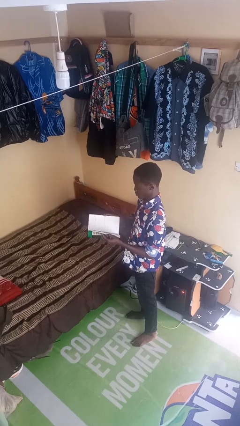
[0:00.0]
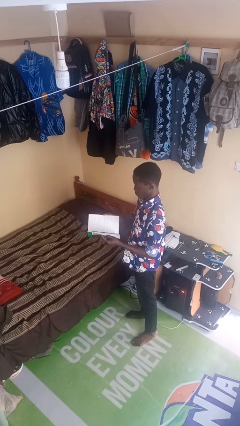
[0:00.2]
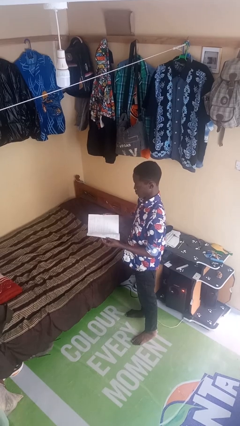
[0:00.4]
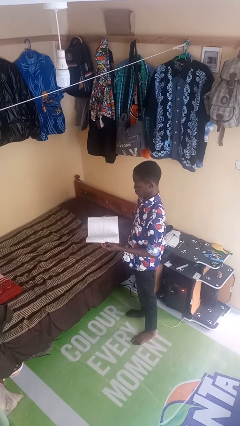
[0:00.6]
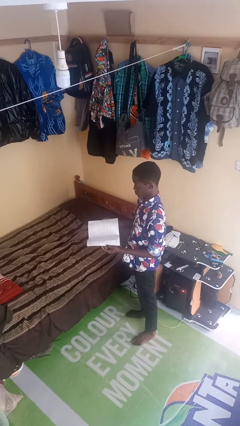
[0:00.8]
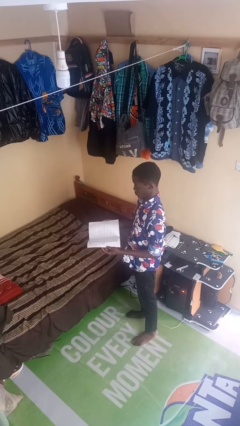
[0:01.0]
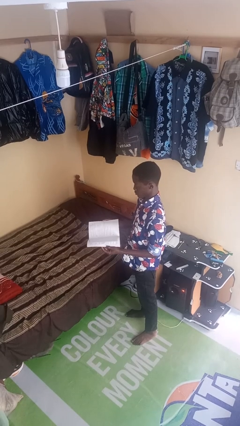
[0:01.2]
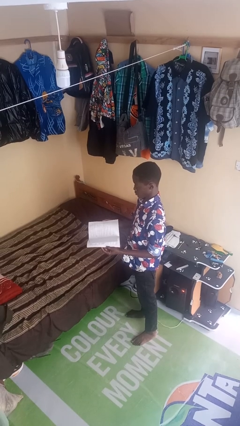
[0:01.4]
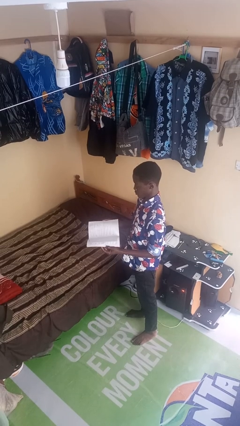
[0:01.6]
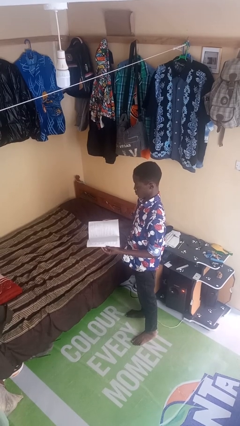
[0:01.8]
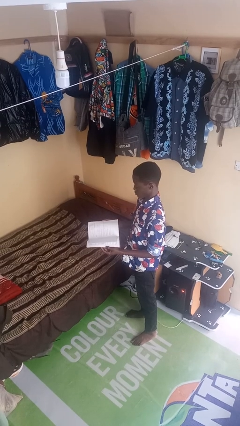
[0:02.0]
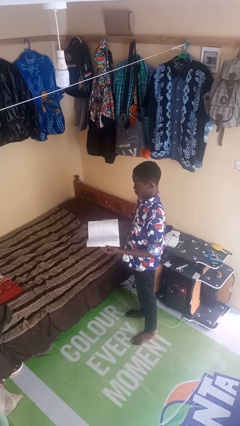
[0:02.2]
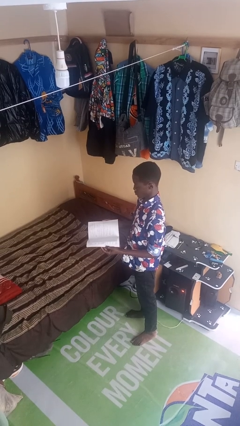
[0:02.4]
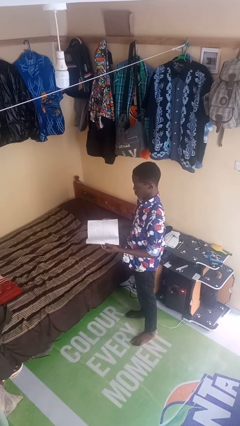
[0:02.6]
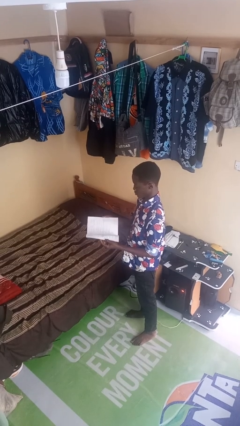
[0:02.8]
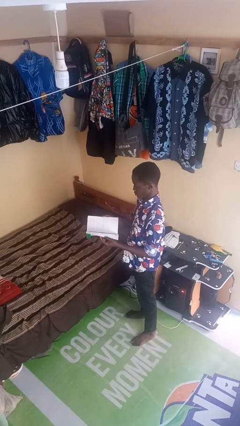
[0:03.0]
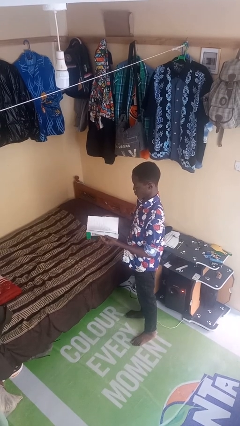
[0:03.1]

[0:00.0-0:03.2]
person reads magazine

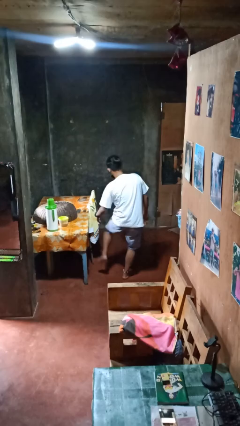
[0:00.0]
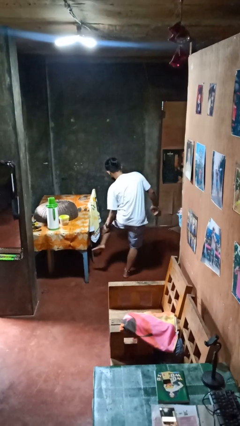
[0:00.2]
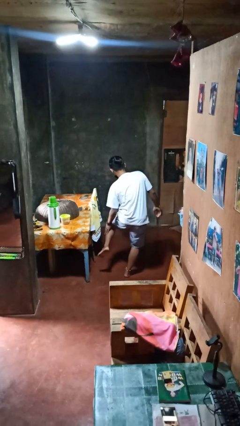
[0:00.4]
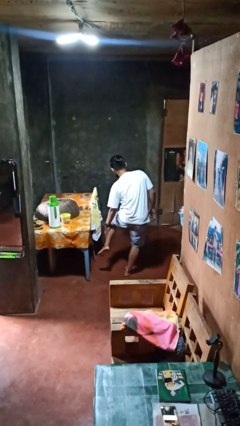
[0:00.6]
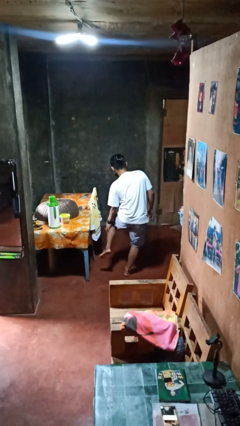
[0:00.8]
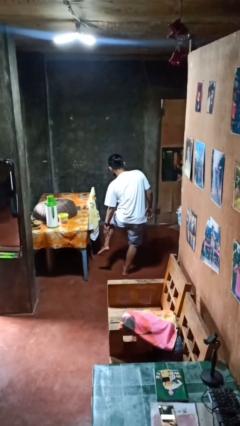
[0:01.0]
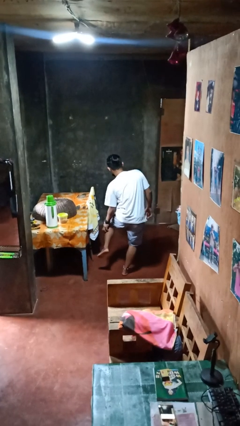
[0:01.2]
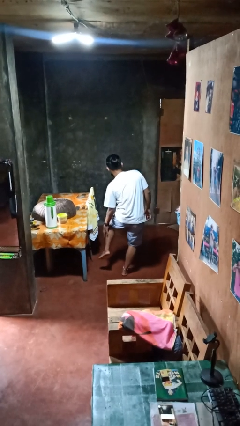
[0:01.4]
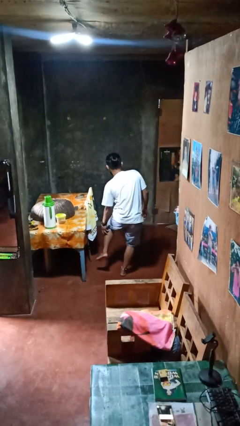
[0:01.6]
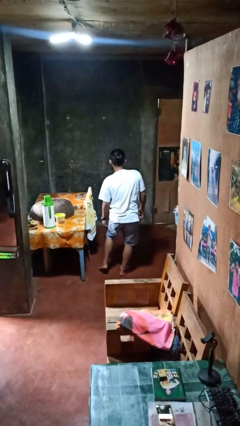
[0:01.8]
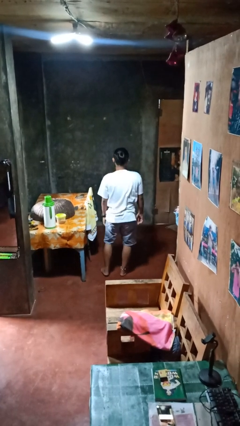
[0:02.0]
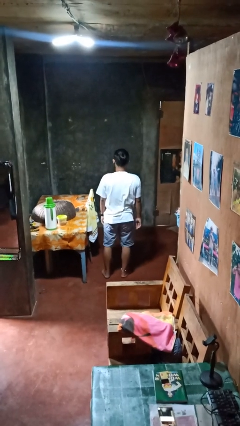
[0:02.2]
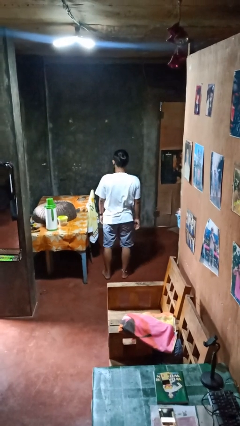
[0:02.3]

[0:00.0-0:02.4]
person swats bug

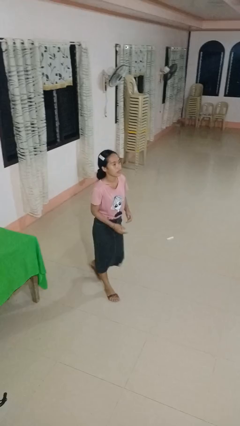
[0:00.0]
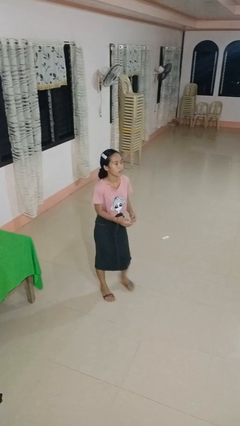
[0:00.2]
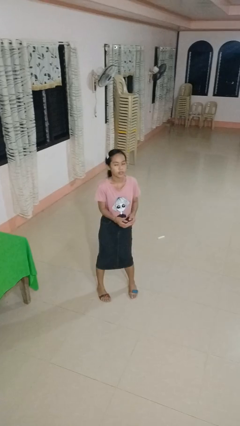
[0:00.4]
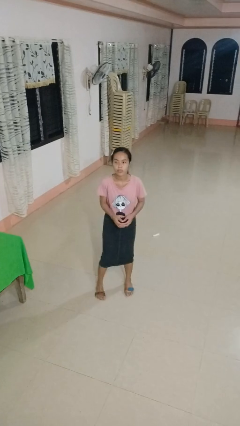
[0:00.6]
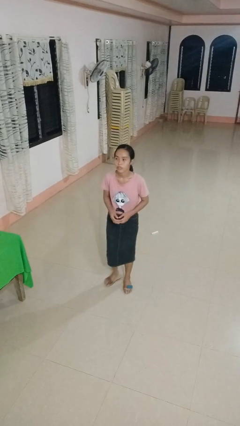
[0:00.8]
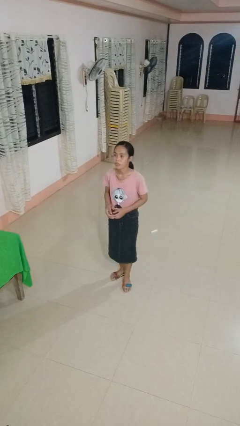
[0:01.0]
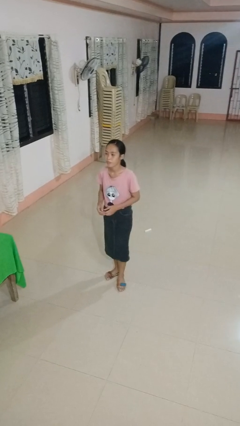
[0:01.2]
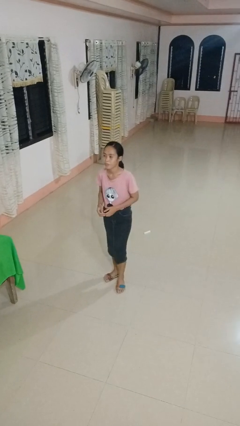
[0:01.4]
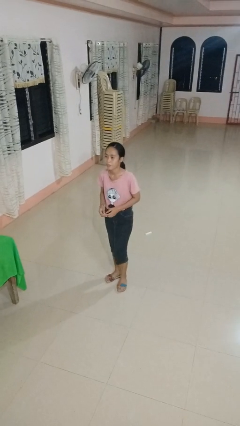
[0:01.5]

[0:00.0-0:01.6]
person slaps hands on thighs

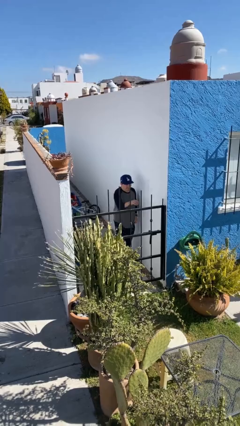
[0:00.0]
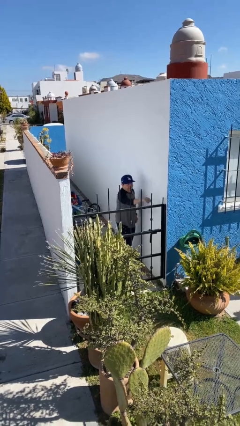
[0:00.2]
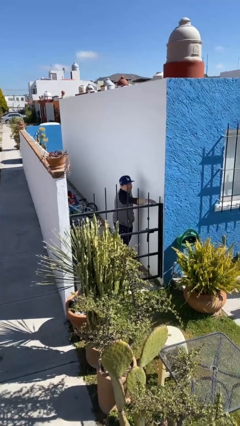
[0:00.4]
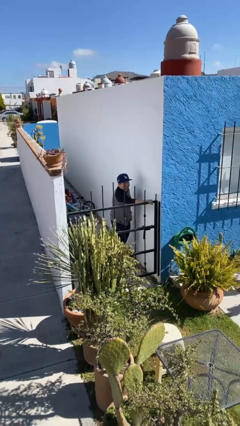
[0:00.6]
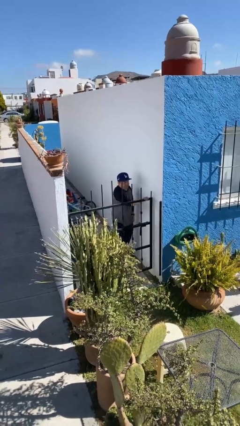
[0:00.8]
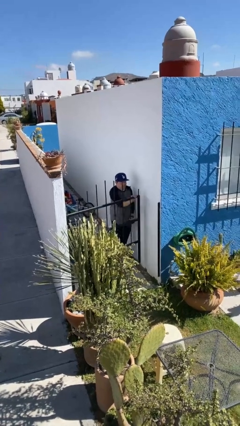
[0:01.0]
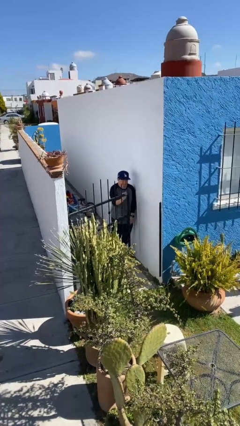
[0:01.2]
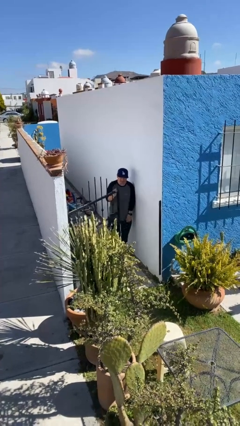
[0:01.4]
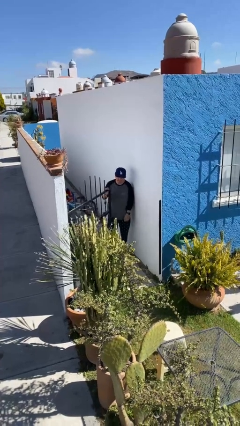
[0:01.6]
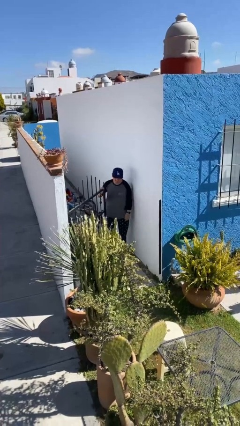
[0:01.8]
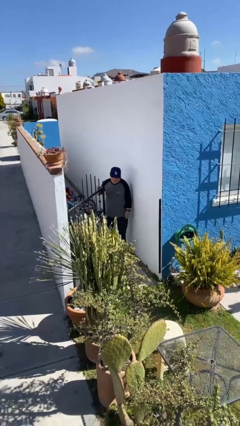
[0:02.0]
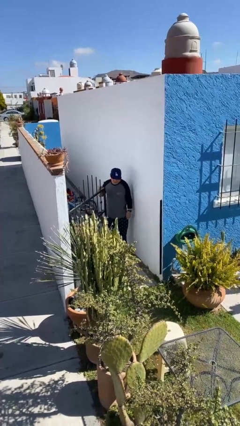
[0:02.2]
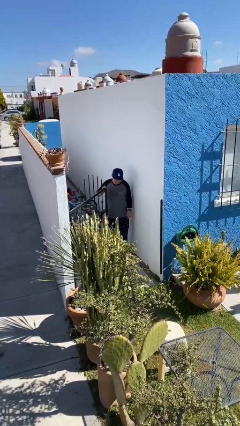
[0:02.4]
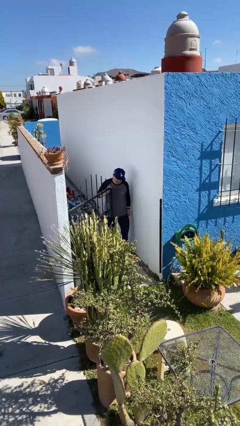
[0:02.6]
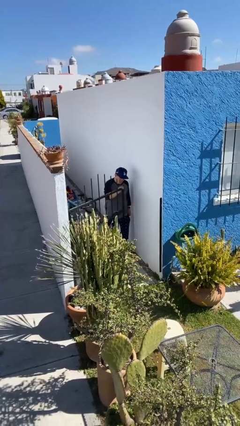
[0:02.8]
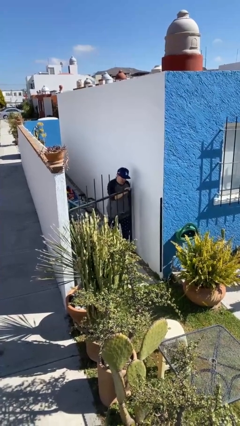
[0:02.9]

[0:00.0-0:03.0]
person opens facility door

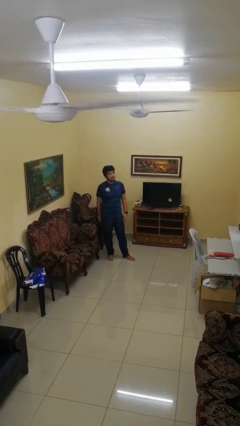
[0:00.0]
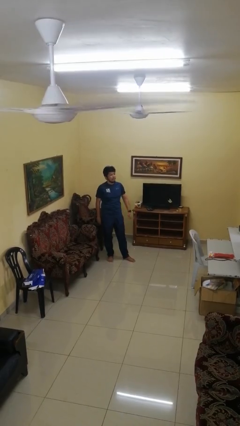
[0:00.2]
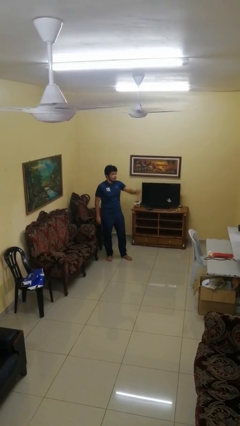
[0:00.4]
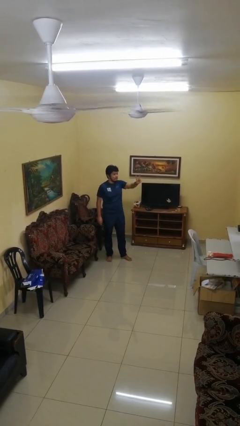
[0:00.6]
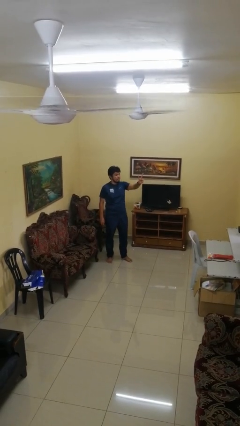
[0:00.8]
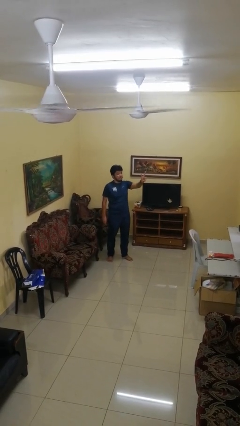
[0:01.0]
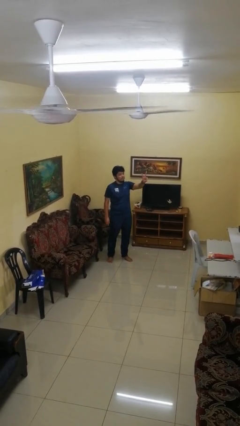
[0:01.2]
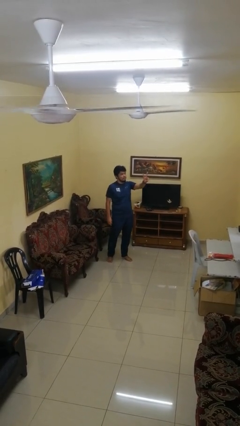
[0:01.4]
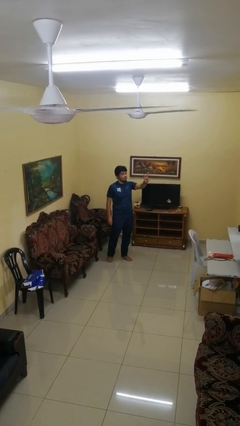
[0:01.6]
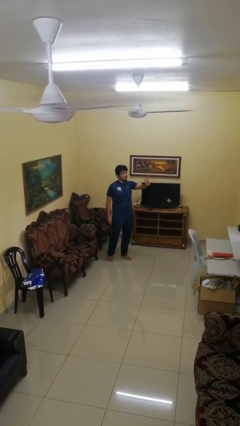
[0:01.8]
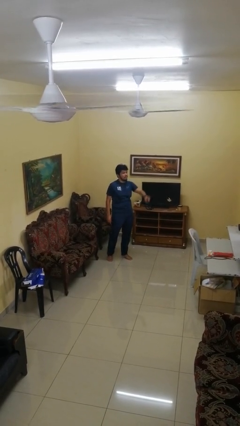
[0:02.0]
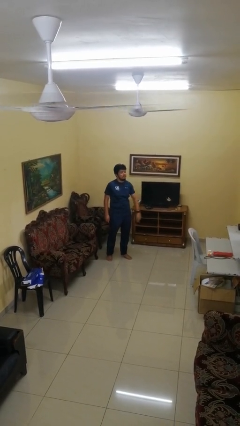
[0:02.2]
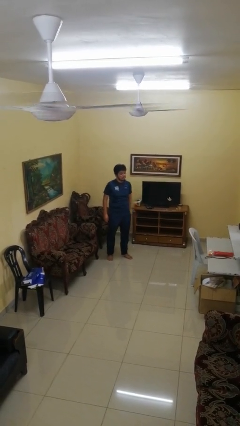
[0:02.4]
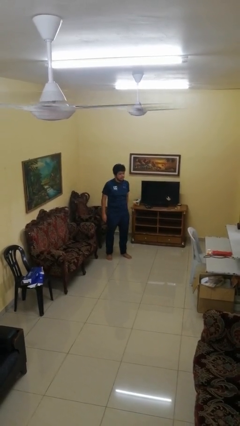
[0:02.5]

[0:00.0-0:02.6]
person gestures peace

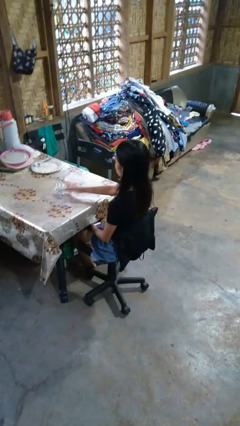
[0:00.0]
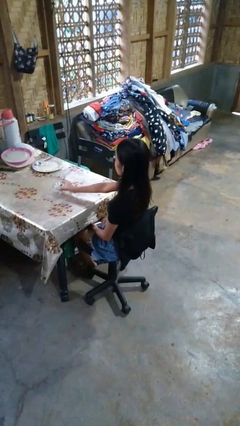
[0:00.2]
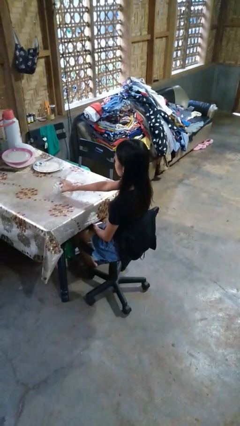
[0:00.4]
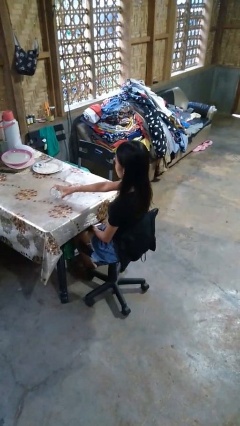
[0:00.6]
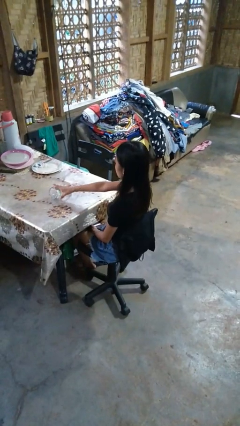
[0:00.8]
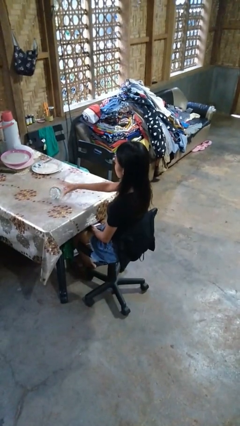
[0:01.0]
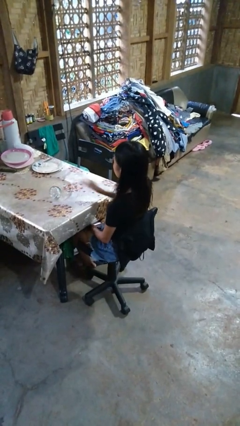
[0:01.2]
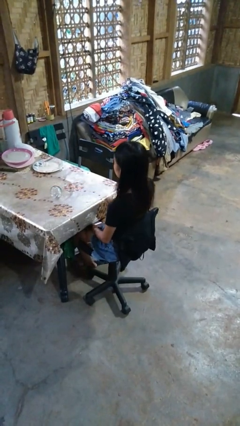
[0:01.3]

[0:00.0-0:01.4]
person knocks over glass

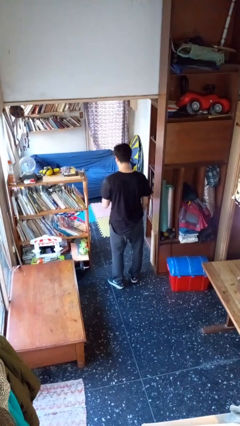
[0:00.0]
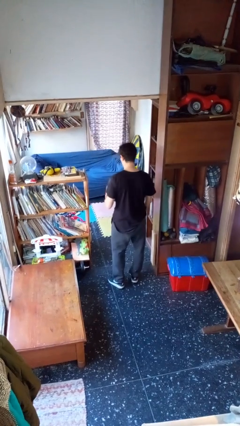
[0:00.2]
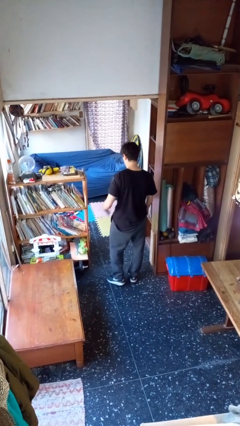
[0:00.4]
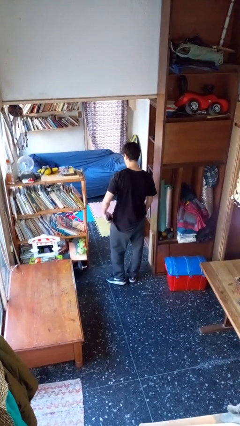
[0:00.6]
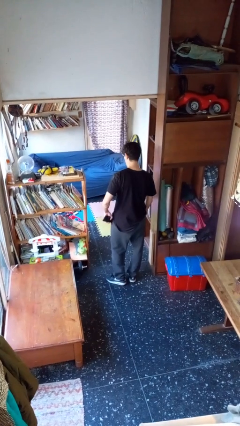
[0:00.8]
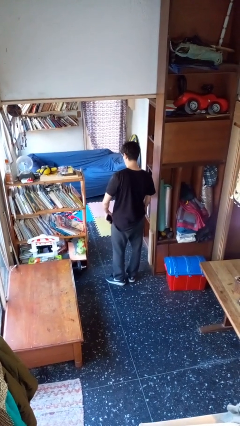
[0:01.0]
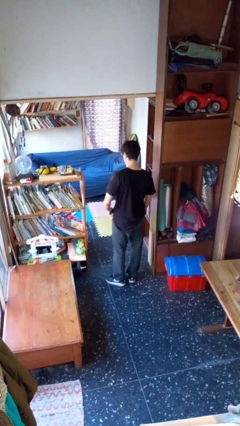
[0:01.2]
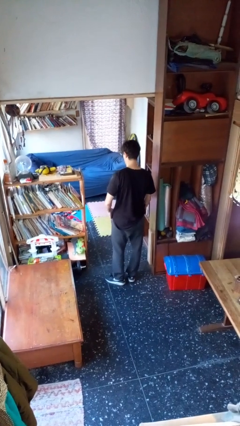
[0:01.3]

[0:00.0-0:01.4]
person puts phone into pocket

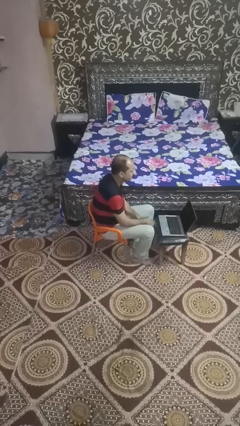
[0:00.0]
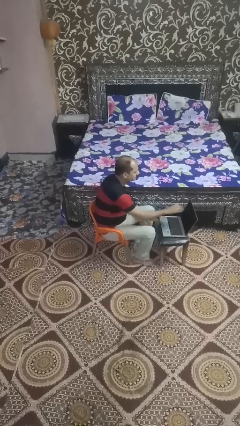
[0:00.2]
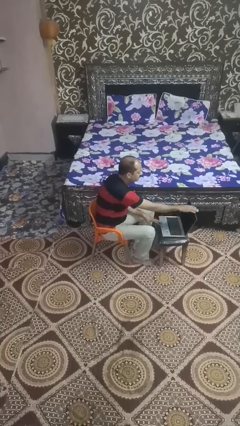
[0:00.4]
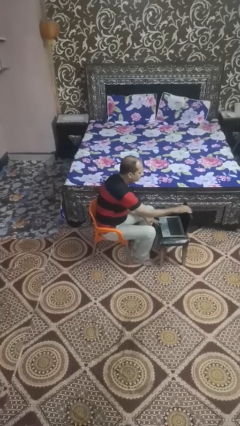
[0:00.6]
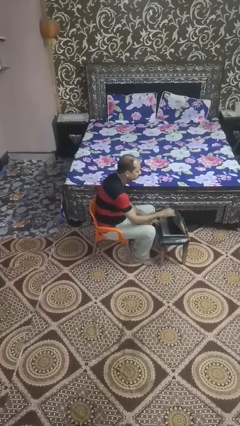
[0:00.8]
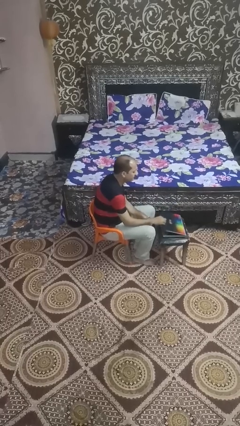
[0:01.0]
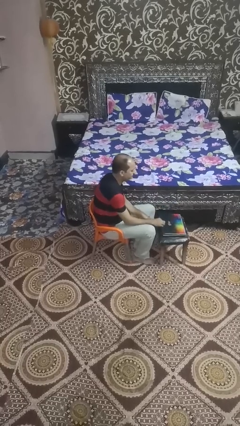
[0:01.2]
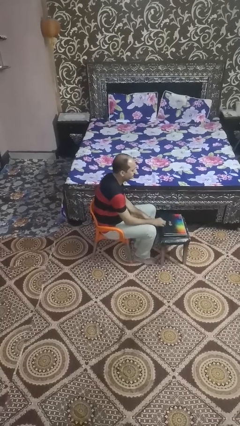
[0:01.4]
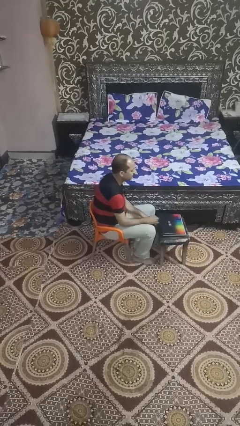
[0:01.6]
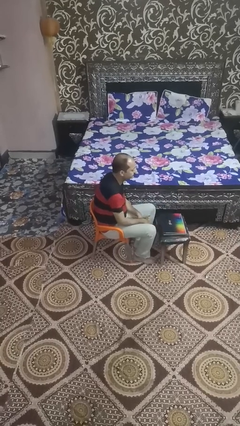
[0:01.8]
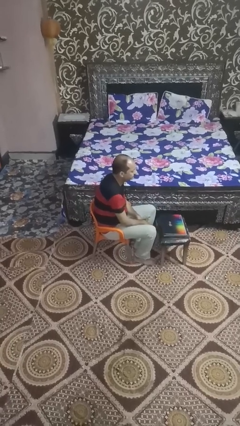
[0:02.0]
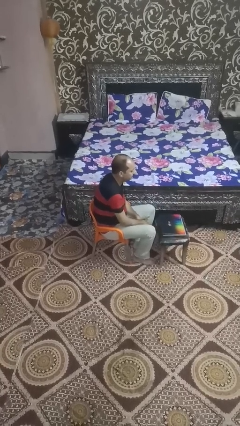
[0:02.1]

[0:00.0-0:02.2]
person closes laptop
